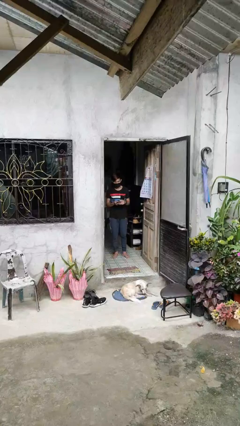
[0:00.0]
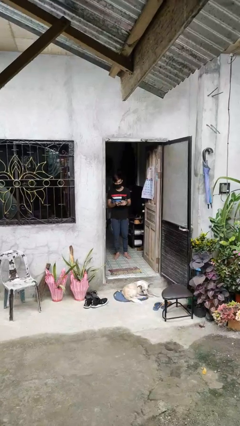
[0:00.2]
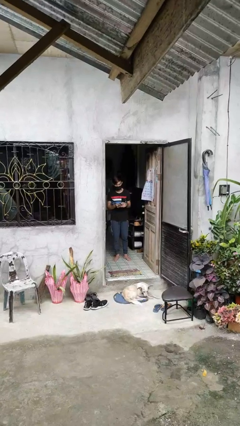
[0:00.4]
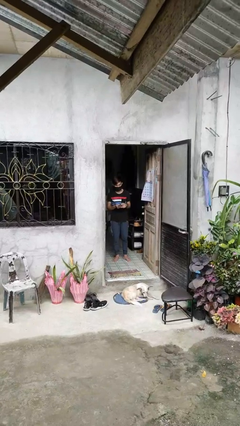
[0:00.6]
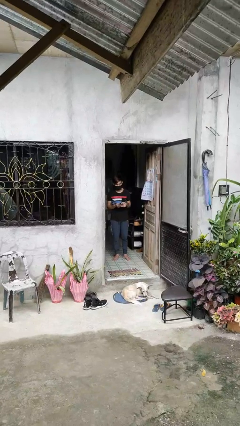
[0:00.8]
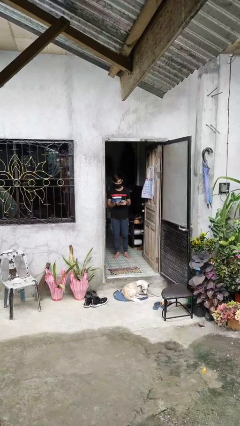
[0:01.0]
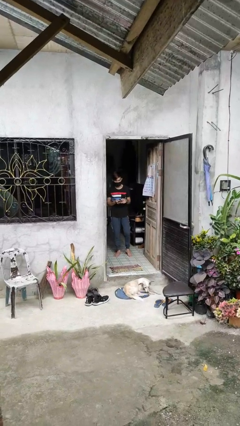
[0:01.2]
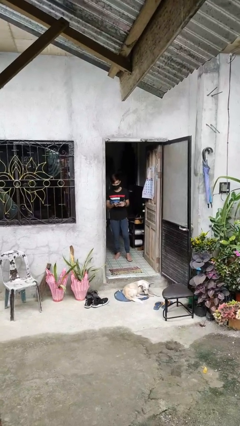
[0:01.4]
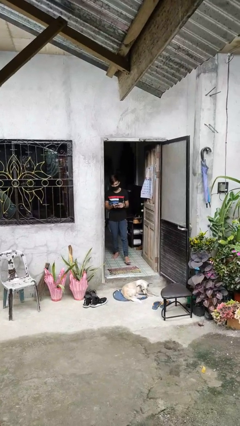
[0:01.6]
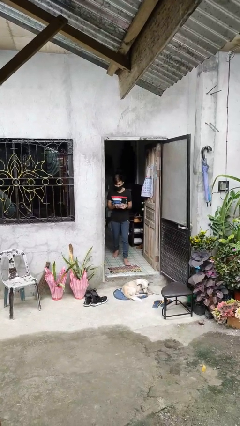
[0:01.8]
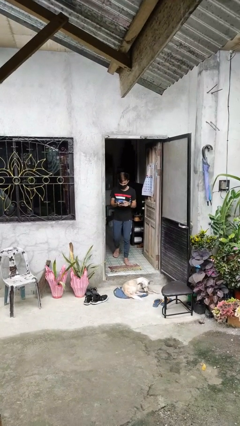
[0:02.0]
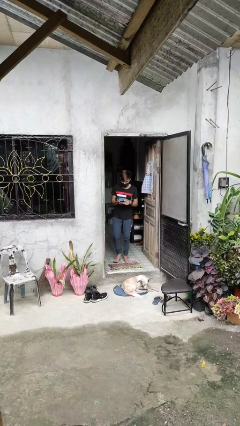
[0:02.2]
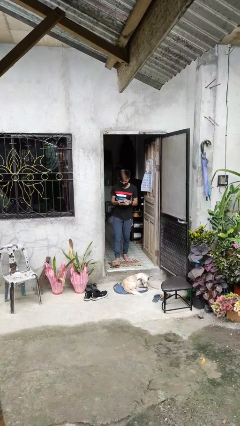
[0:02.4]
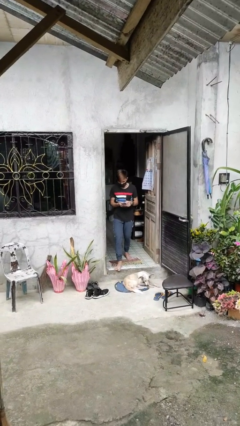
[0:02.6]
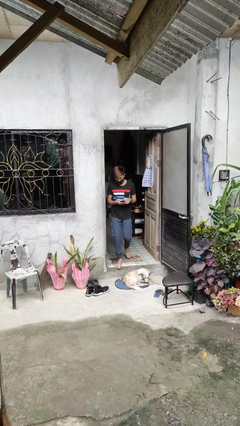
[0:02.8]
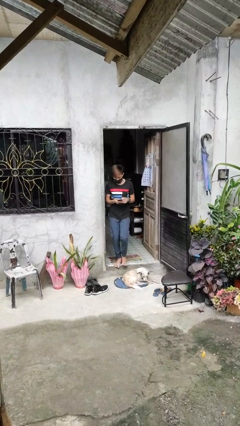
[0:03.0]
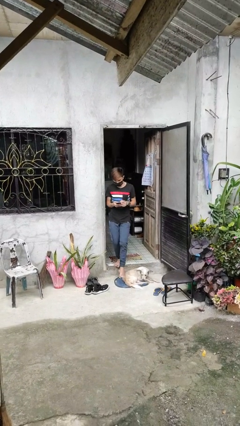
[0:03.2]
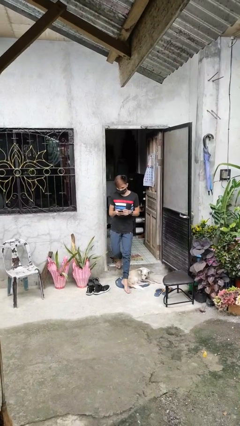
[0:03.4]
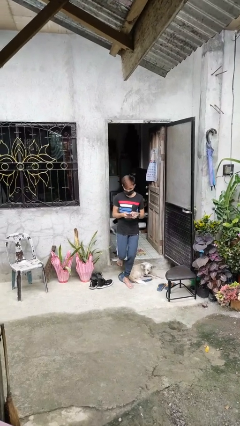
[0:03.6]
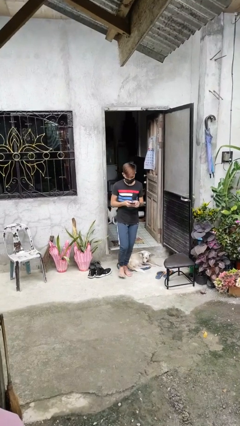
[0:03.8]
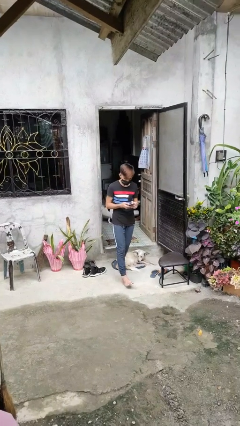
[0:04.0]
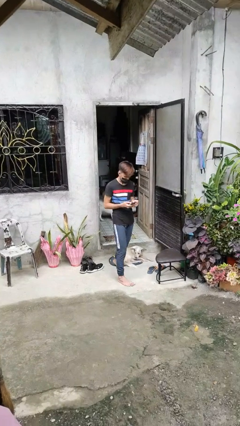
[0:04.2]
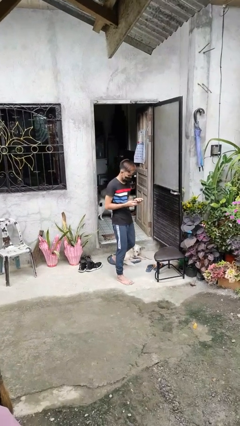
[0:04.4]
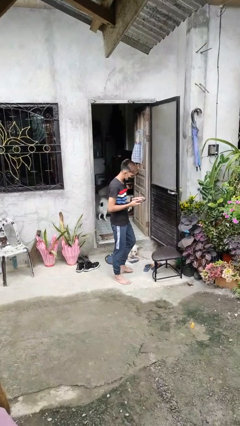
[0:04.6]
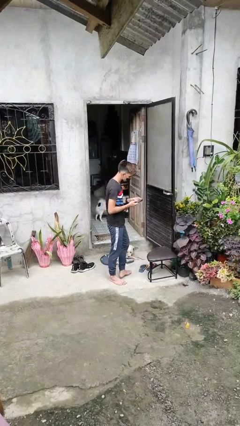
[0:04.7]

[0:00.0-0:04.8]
person enters scene through structure

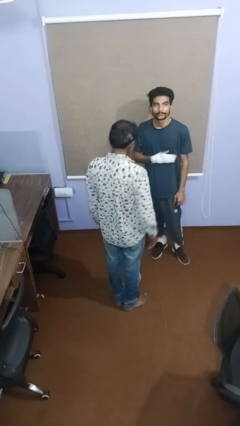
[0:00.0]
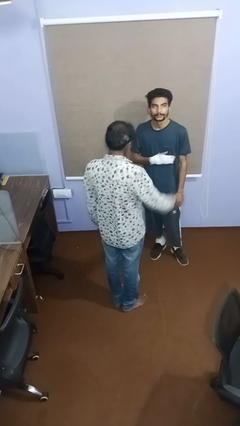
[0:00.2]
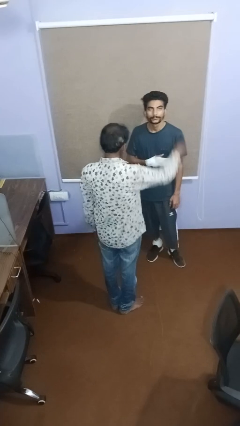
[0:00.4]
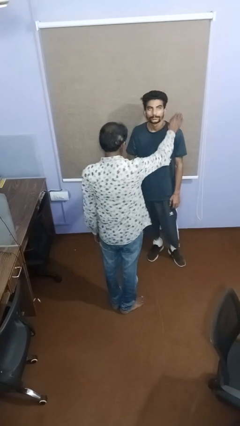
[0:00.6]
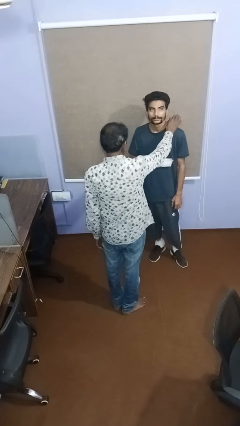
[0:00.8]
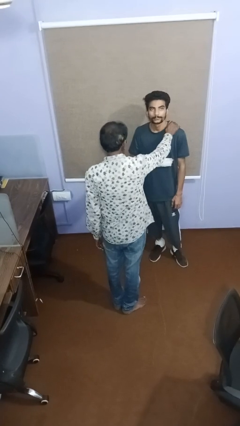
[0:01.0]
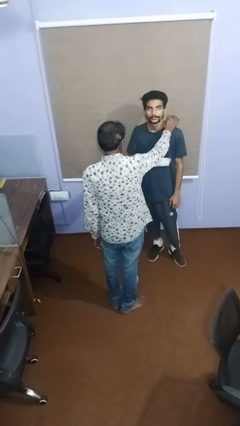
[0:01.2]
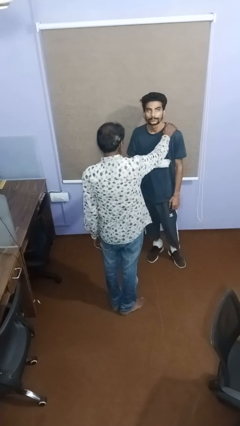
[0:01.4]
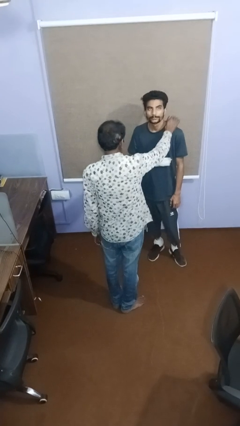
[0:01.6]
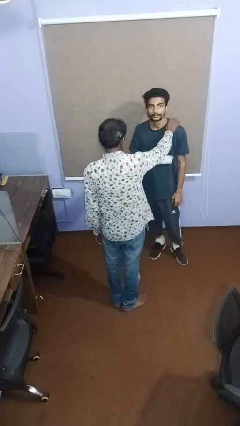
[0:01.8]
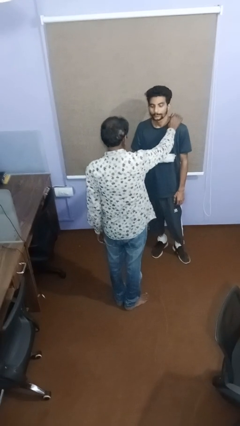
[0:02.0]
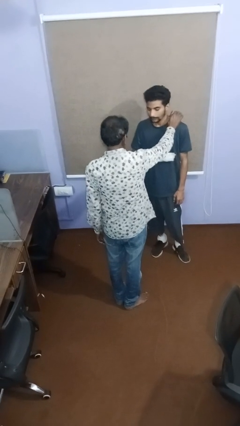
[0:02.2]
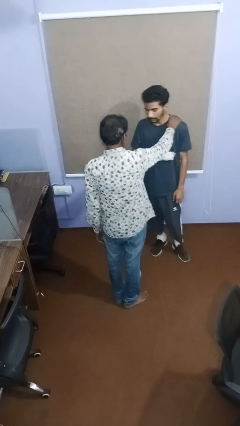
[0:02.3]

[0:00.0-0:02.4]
person pounds shoulders of person

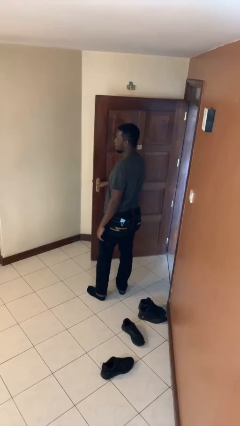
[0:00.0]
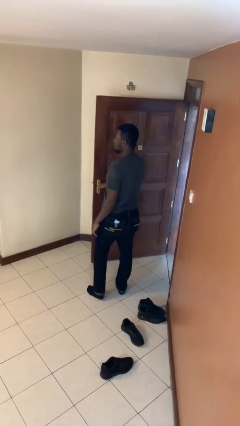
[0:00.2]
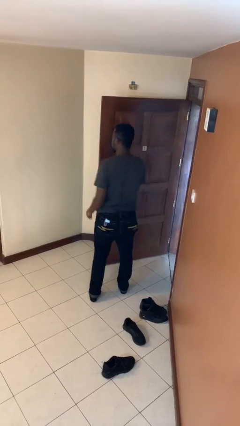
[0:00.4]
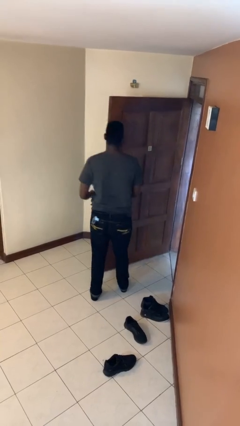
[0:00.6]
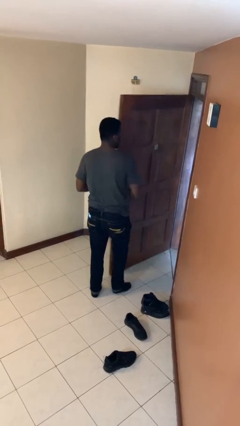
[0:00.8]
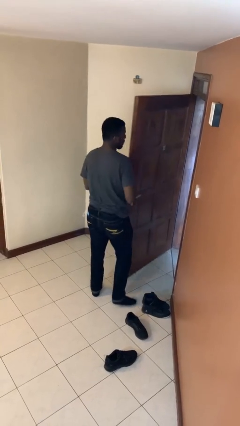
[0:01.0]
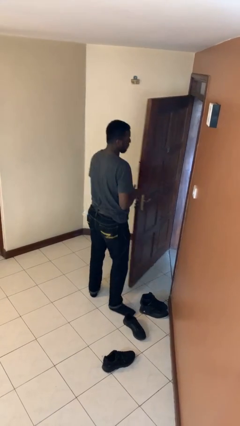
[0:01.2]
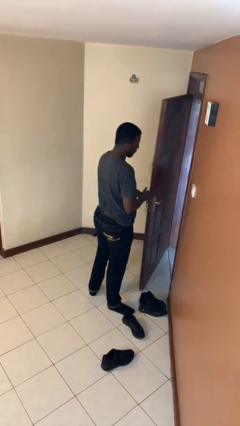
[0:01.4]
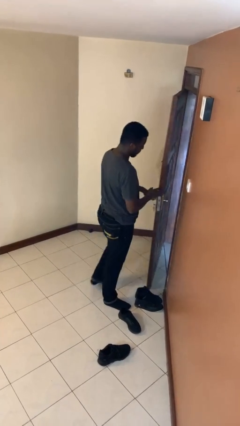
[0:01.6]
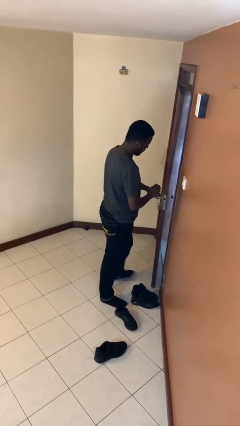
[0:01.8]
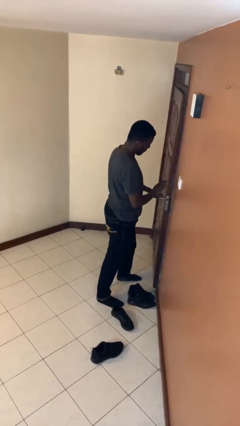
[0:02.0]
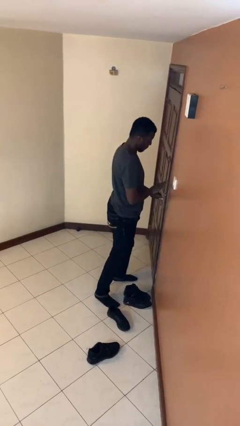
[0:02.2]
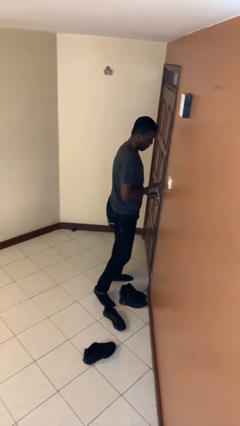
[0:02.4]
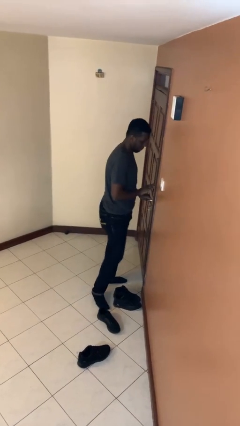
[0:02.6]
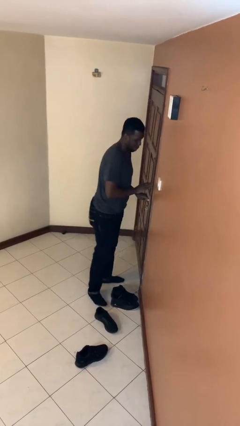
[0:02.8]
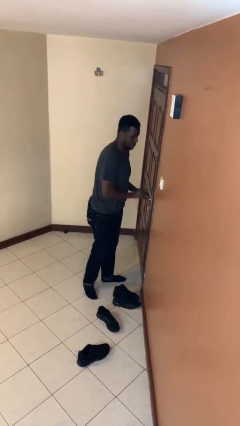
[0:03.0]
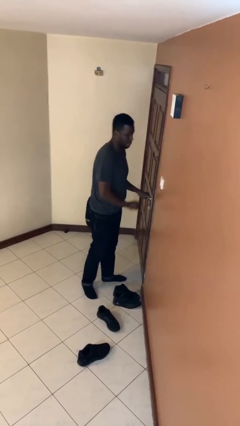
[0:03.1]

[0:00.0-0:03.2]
person closes facility door

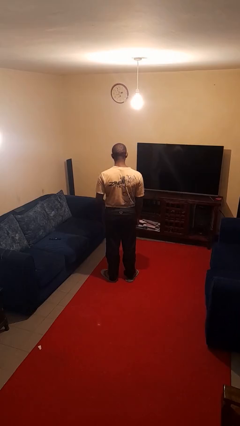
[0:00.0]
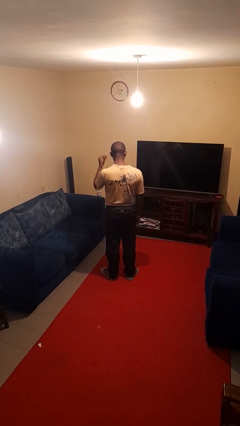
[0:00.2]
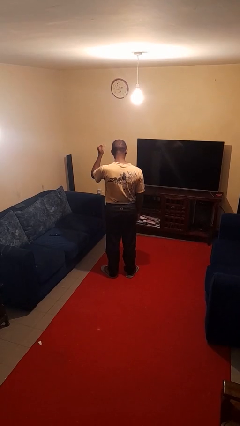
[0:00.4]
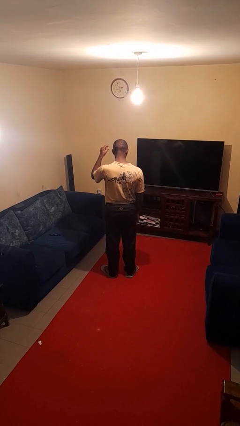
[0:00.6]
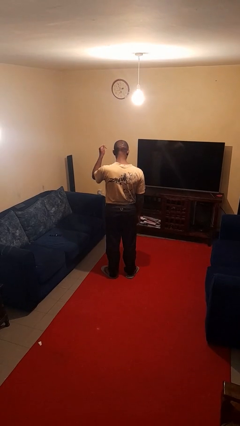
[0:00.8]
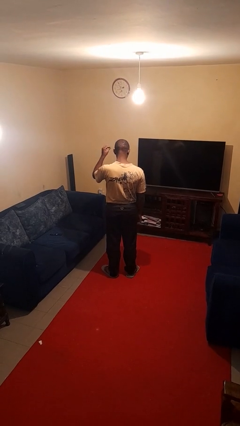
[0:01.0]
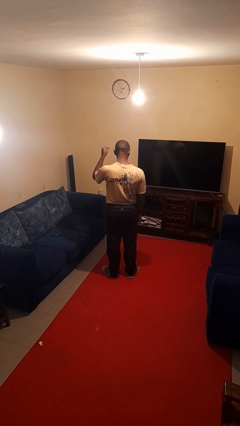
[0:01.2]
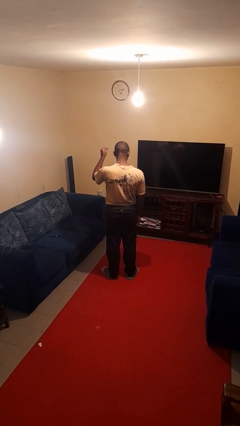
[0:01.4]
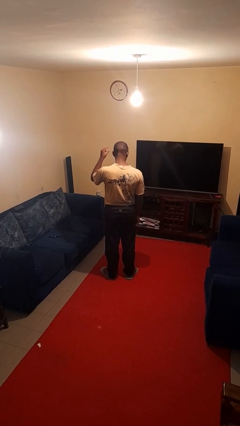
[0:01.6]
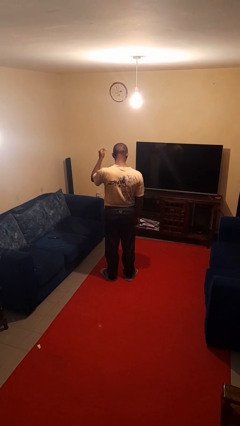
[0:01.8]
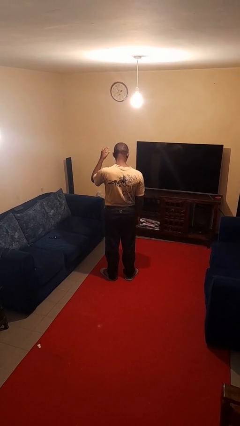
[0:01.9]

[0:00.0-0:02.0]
person snaps fingers

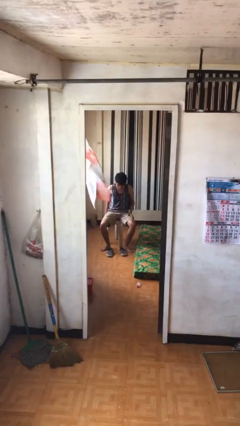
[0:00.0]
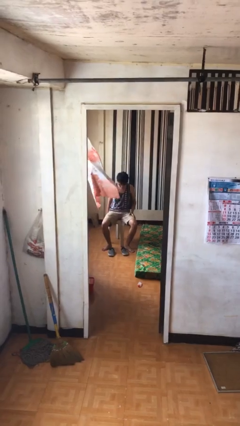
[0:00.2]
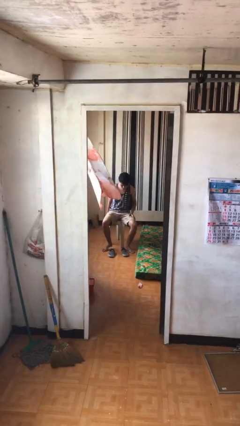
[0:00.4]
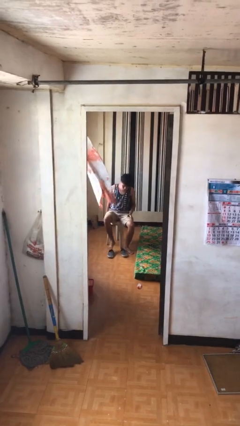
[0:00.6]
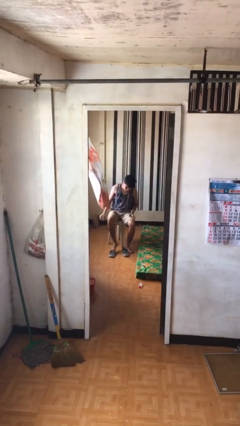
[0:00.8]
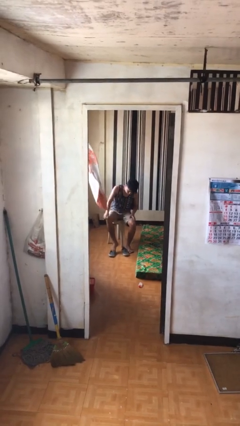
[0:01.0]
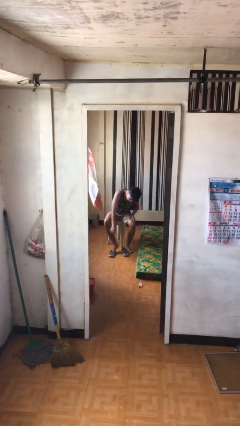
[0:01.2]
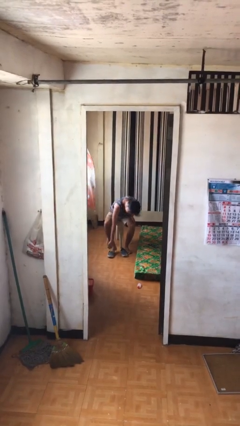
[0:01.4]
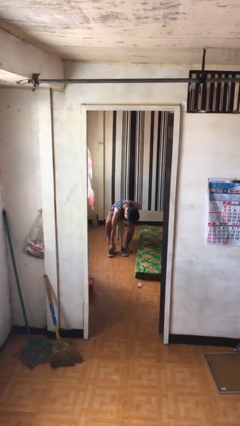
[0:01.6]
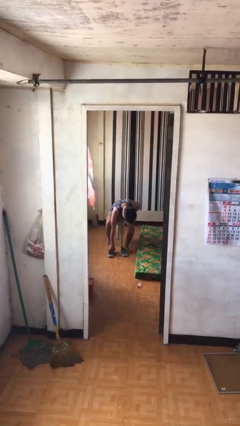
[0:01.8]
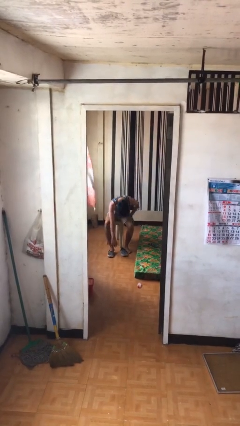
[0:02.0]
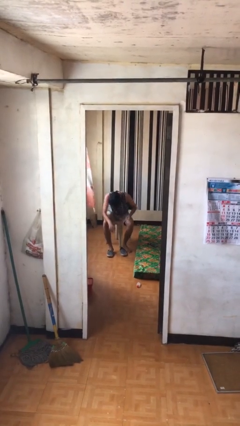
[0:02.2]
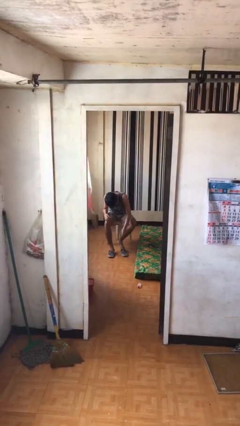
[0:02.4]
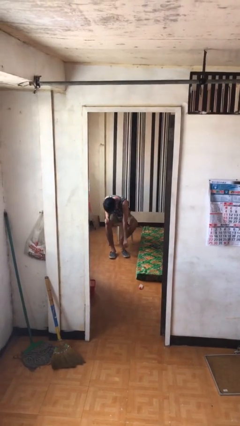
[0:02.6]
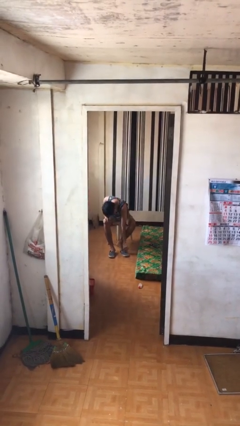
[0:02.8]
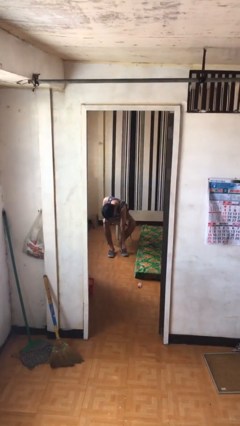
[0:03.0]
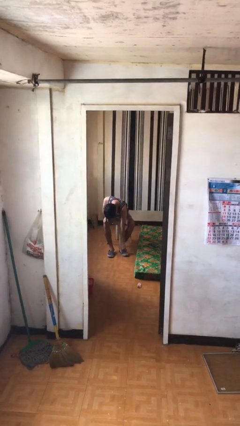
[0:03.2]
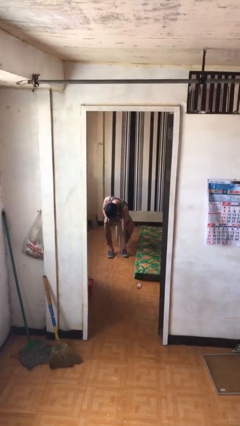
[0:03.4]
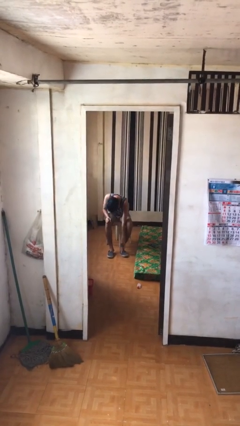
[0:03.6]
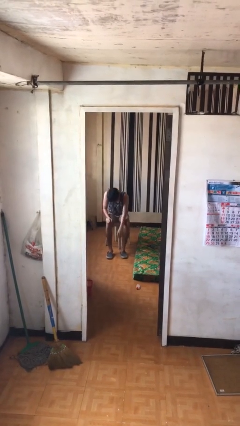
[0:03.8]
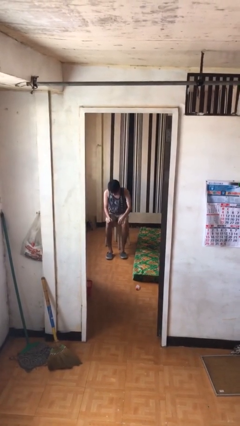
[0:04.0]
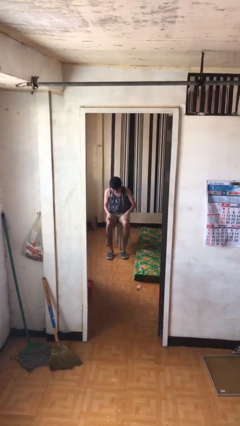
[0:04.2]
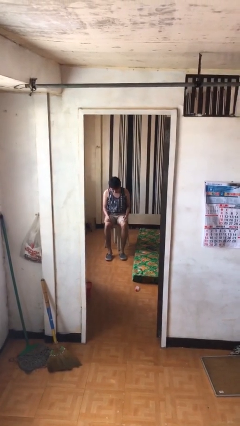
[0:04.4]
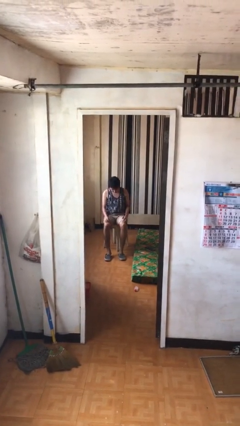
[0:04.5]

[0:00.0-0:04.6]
person puts on shoes
